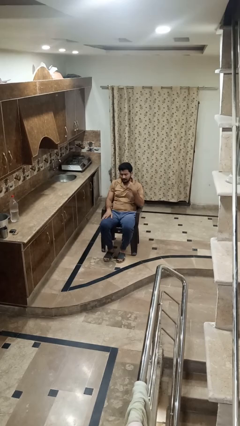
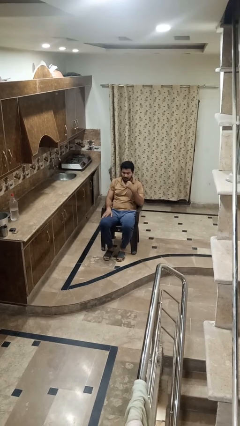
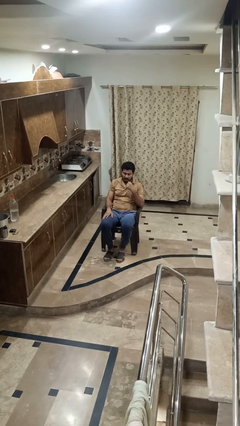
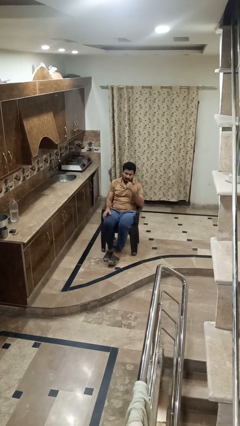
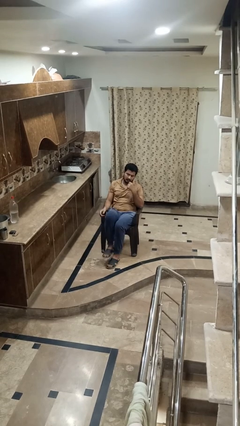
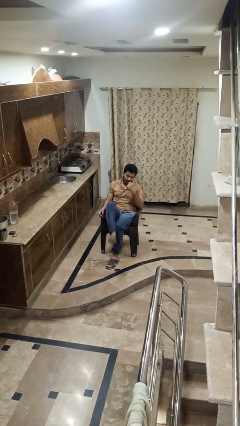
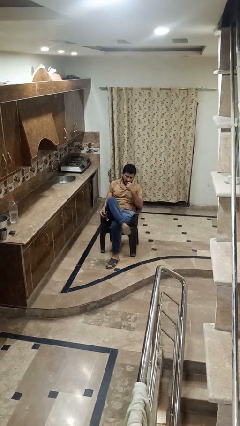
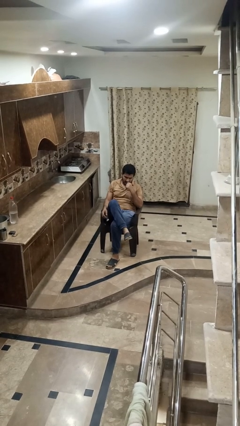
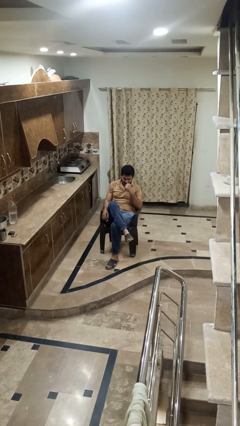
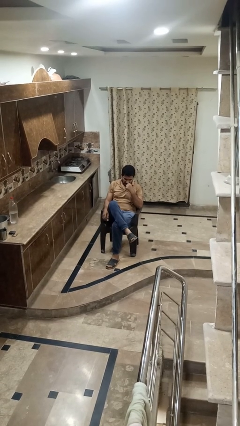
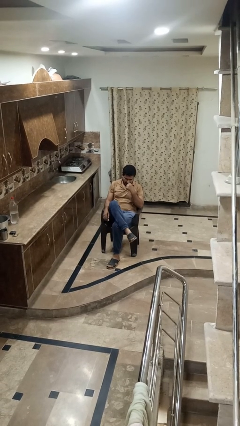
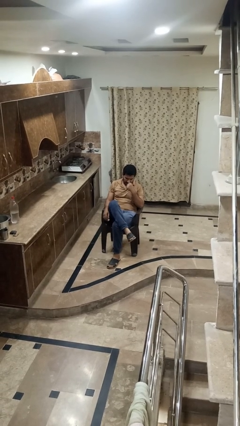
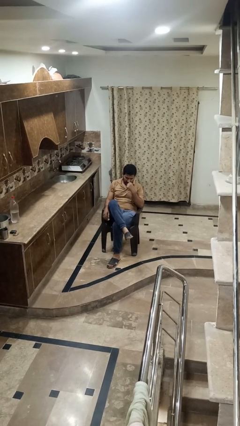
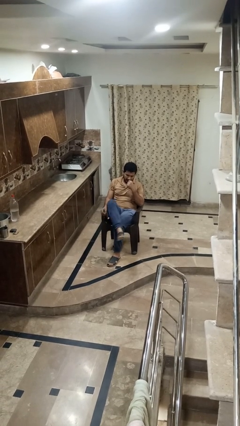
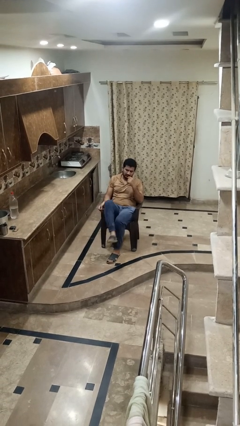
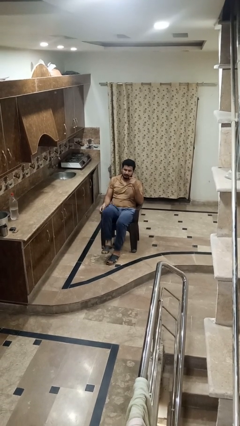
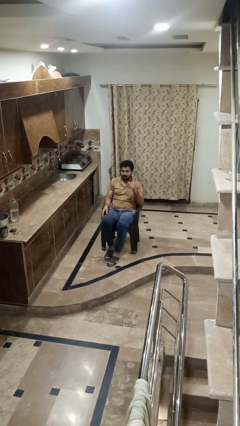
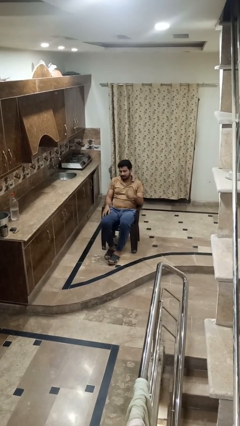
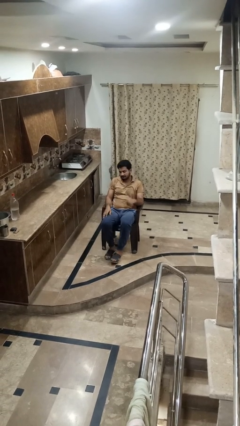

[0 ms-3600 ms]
person crosses legs

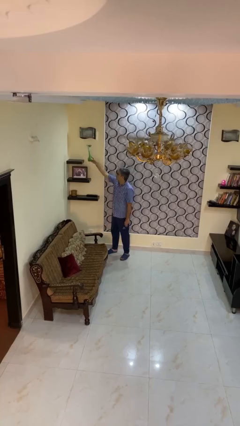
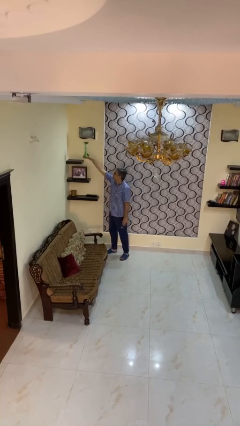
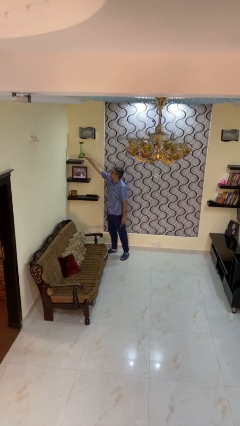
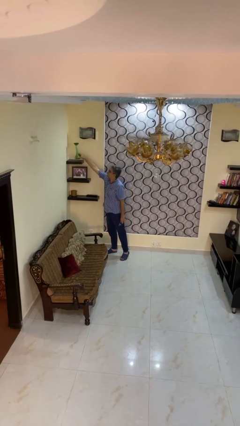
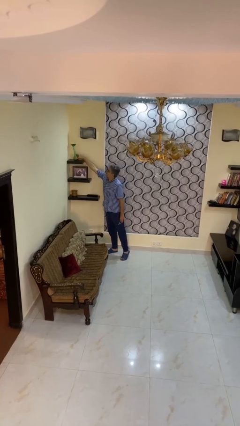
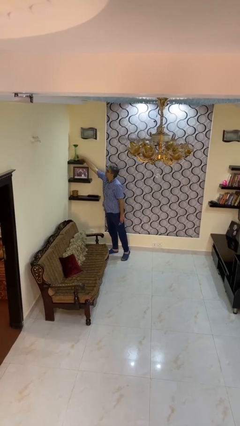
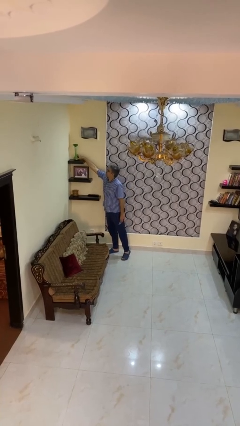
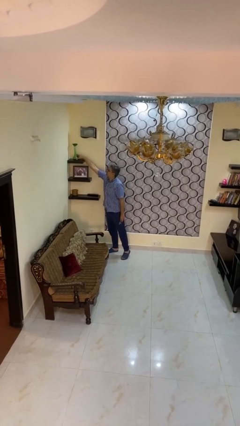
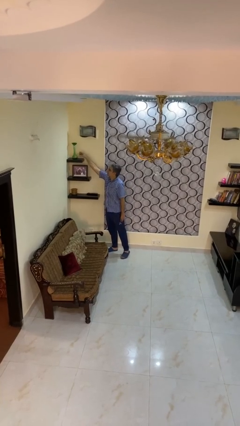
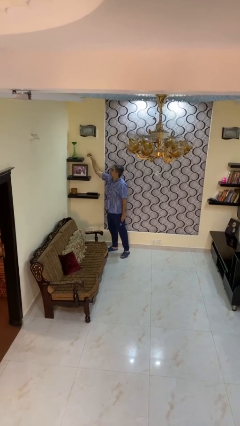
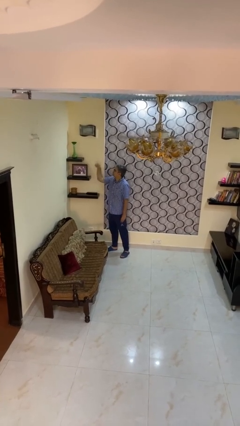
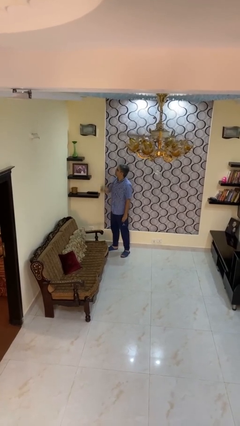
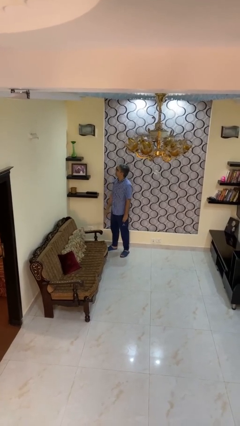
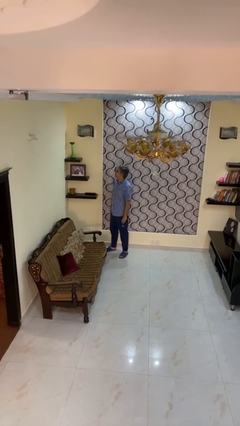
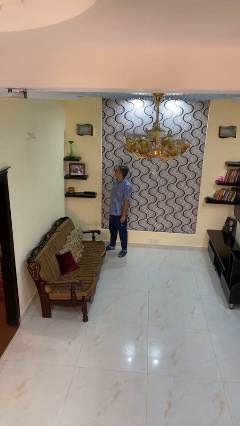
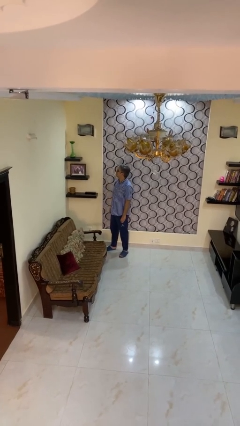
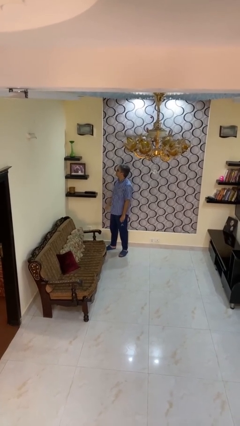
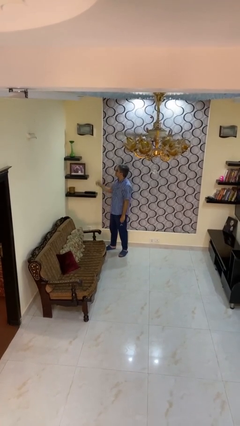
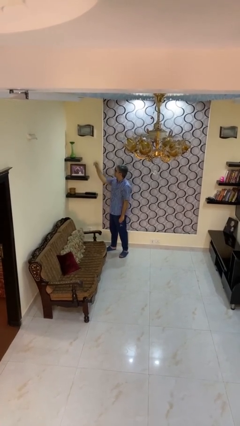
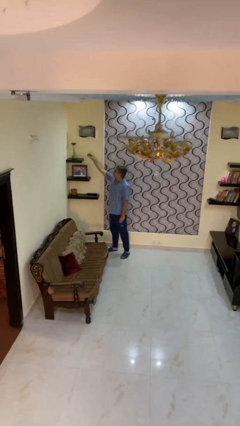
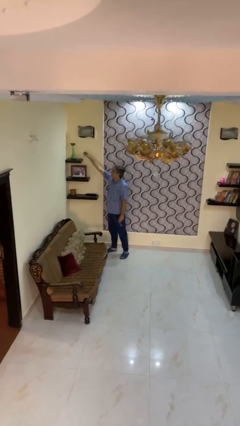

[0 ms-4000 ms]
person puts down object on shelf

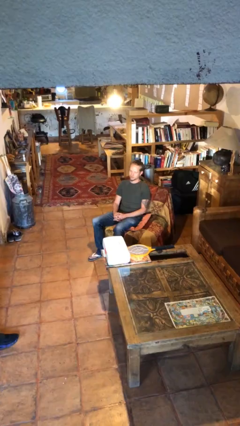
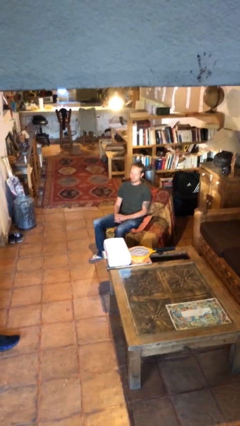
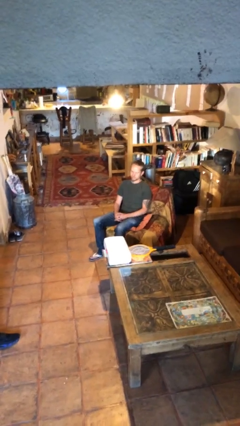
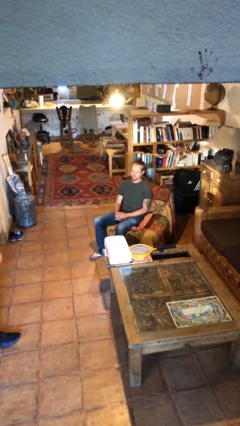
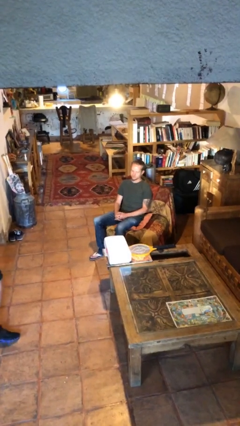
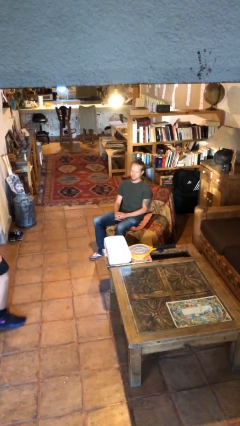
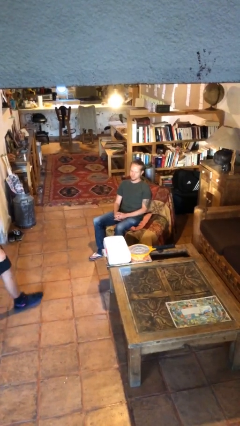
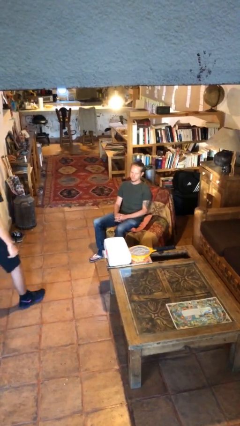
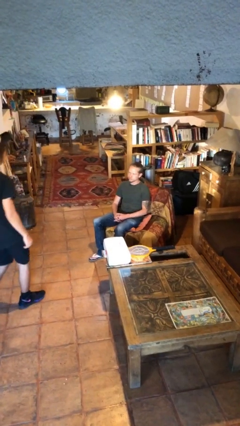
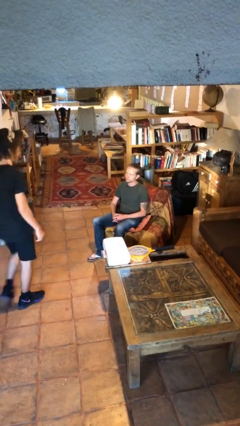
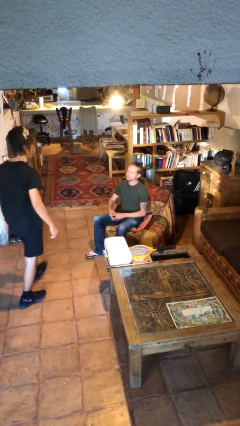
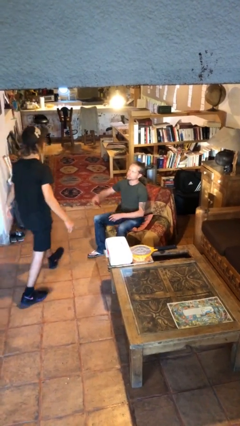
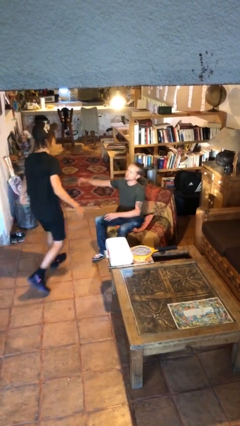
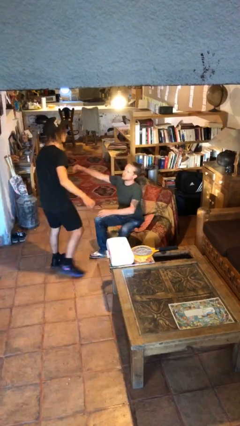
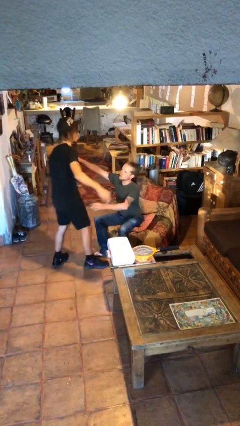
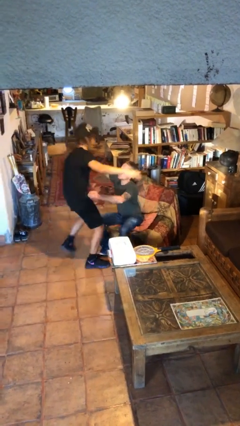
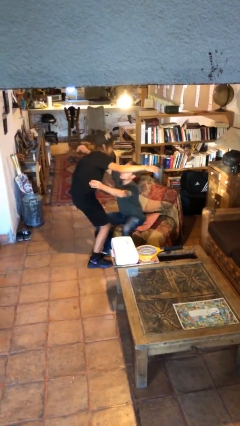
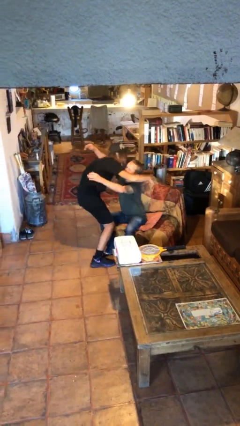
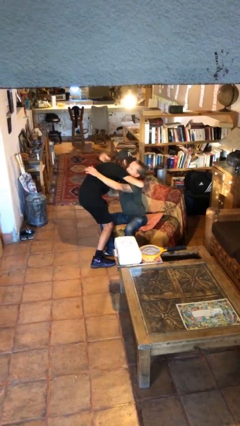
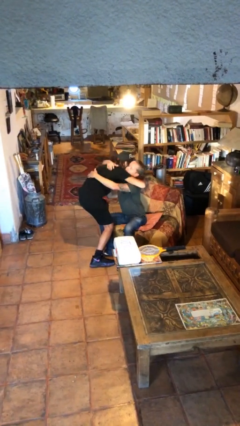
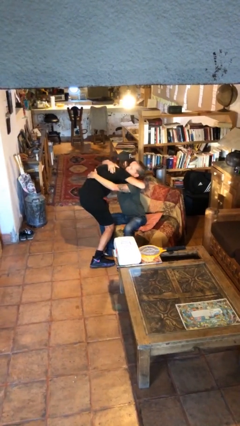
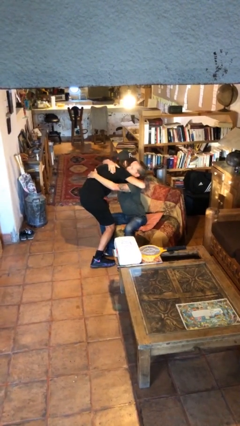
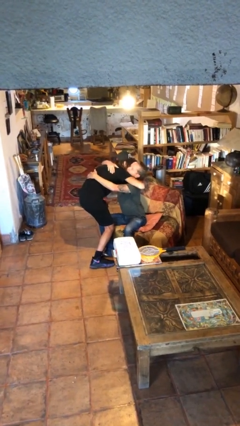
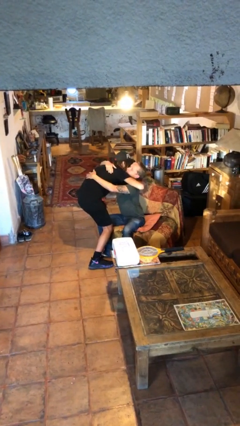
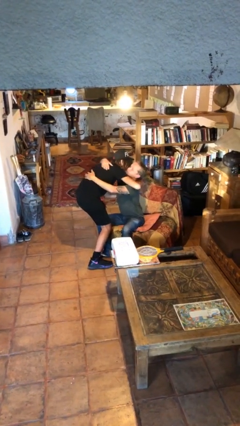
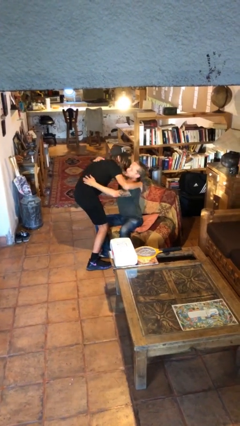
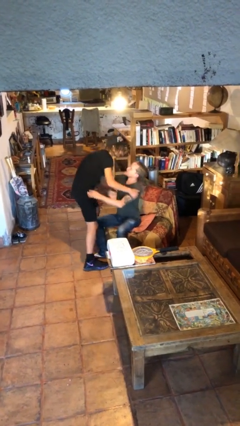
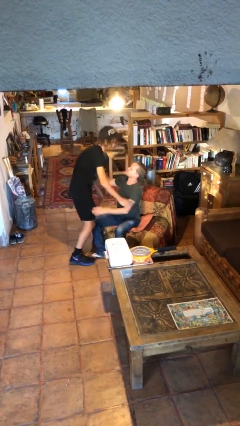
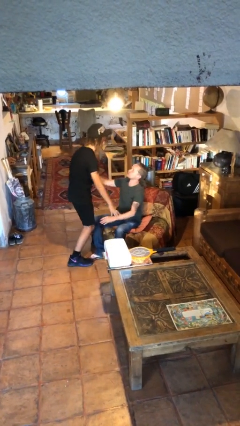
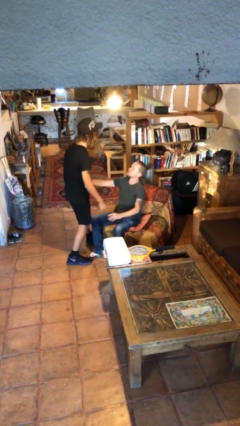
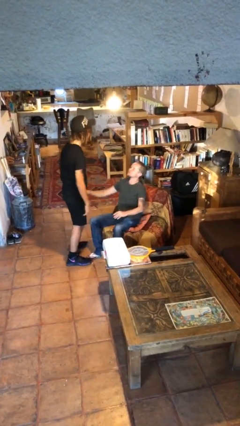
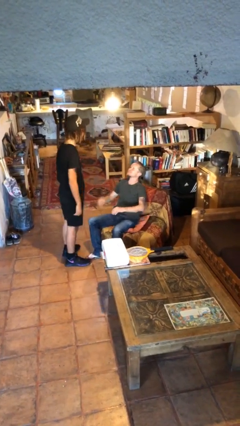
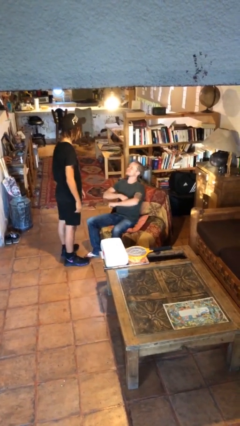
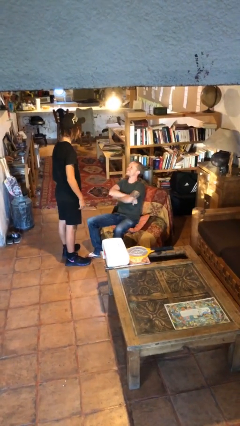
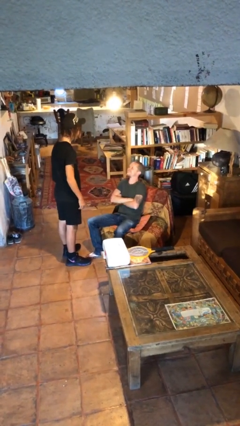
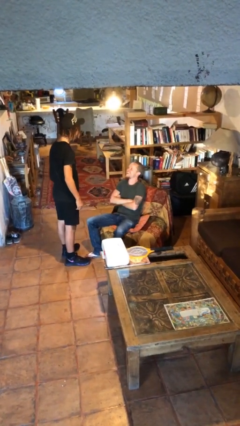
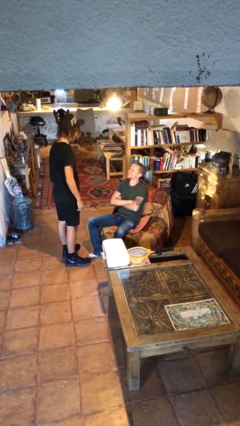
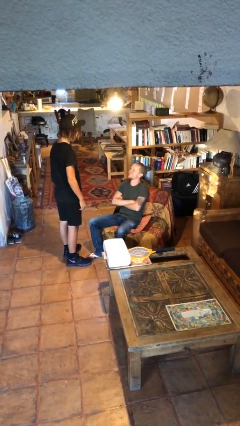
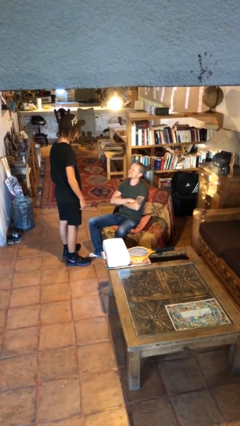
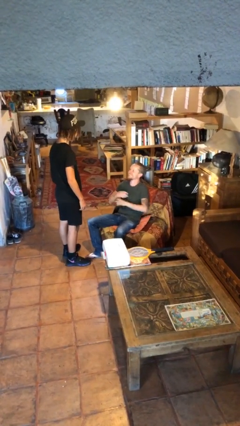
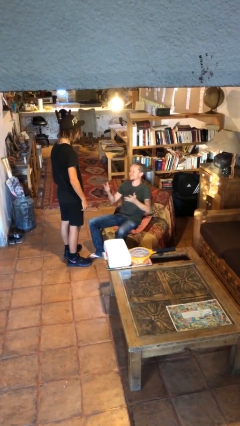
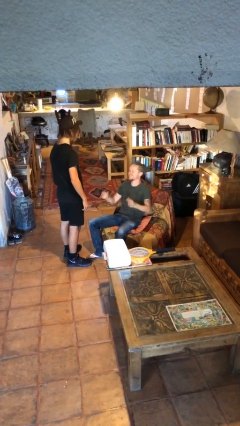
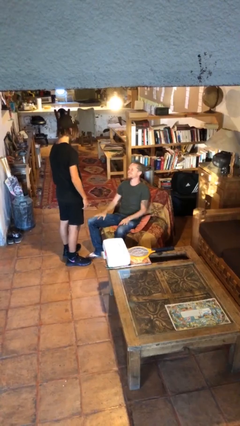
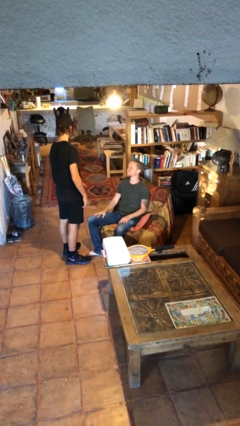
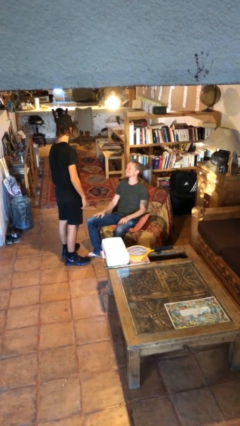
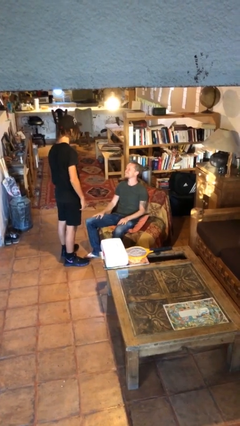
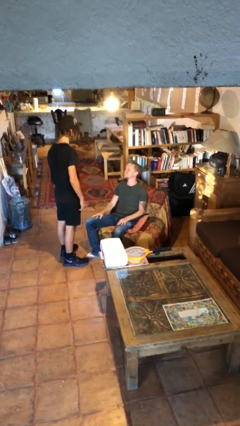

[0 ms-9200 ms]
person embraces person

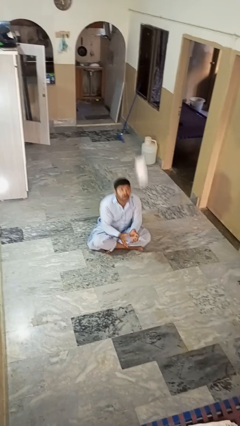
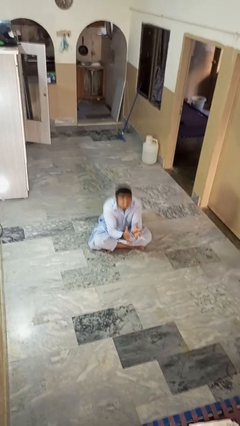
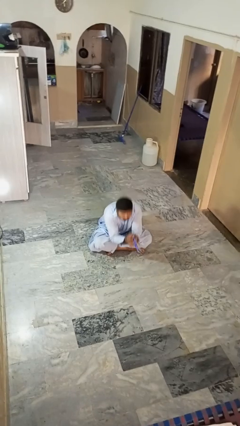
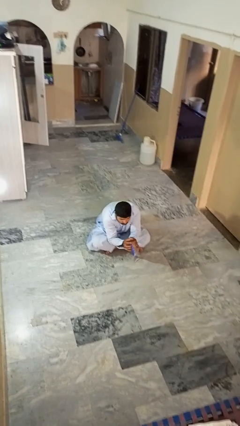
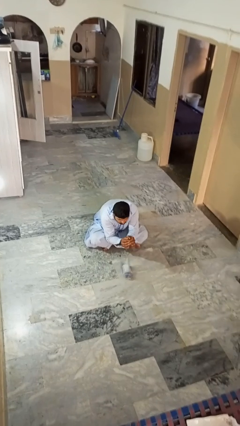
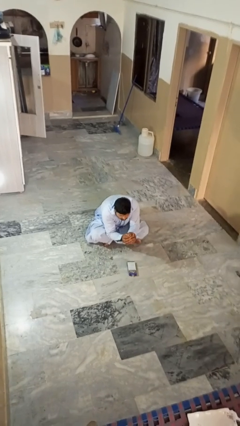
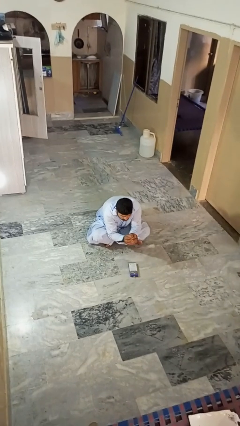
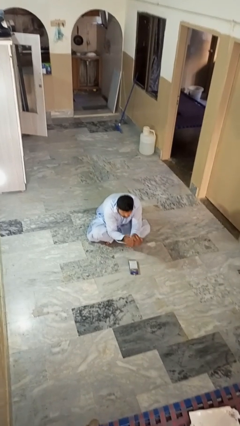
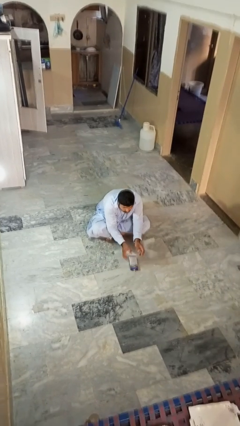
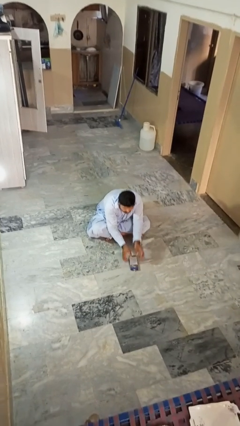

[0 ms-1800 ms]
person catches dropped object
